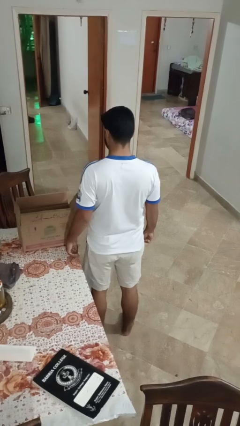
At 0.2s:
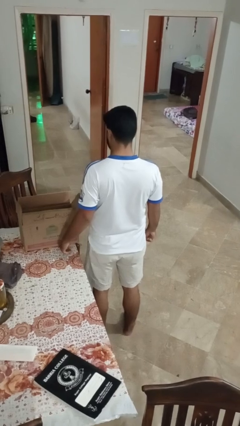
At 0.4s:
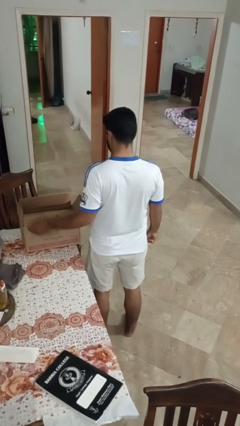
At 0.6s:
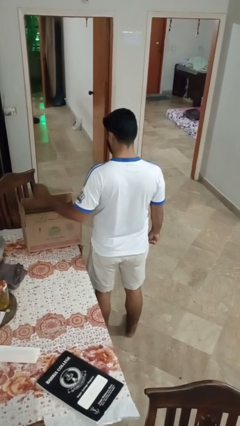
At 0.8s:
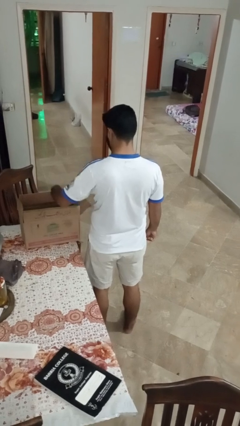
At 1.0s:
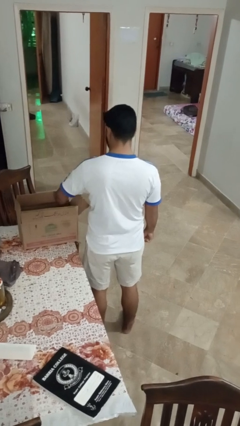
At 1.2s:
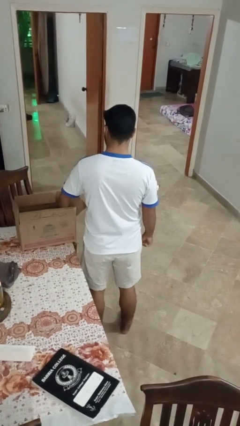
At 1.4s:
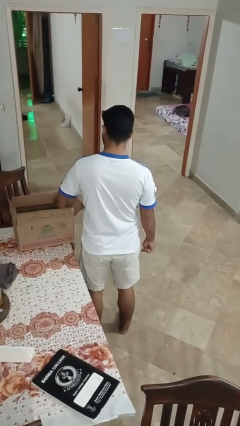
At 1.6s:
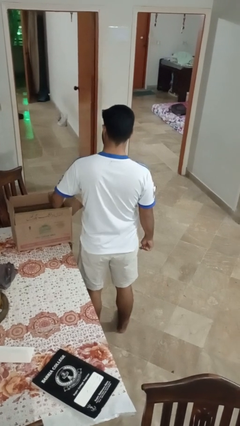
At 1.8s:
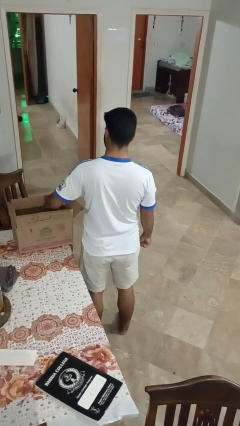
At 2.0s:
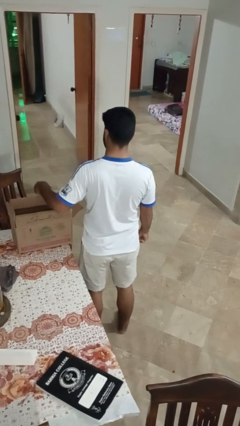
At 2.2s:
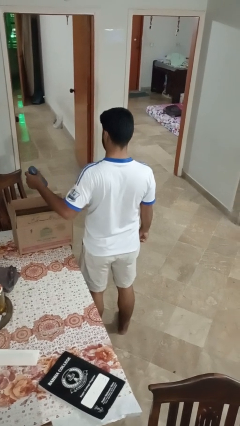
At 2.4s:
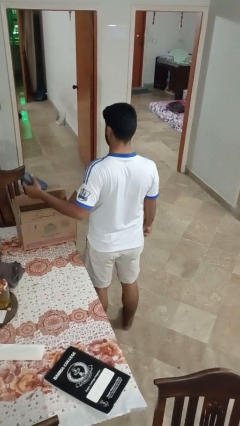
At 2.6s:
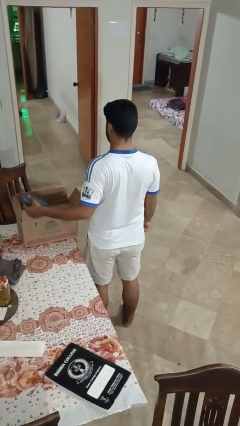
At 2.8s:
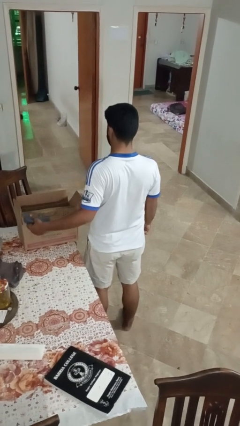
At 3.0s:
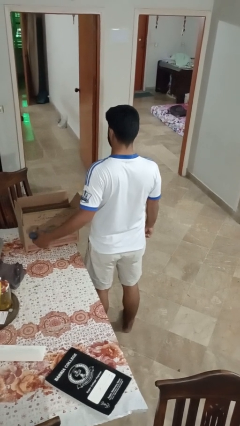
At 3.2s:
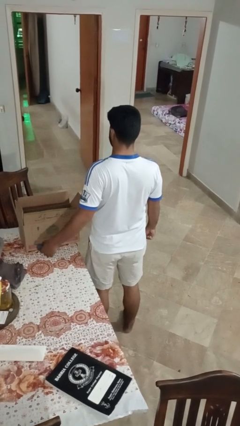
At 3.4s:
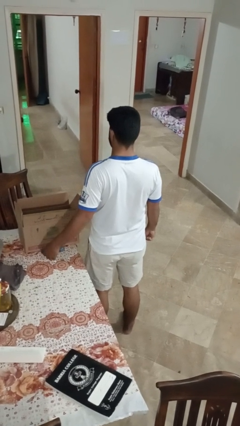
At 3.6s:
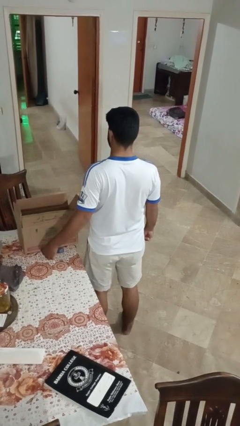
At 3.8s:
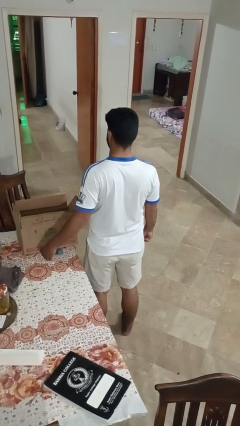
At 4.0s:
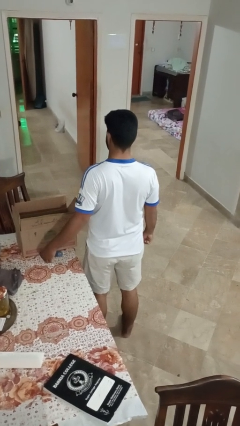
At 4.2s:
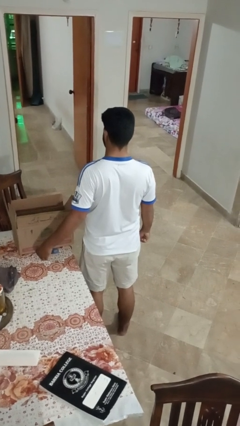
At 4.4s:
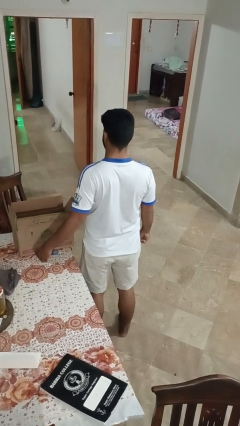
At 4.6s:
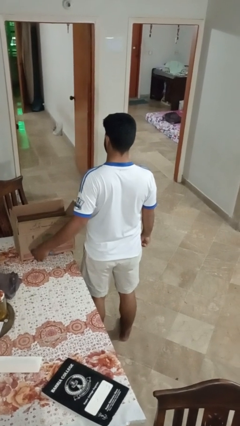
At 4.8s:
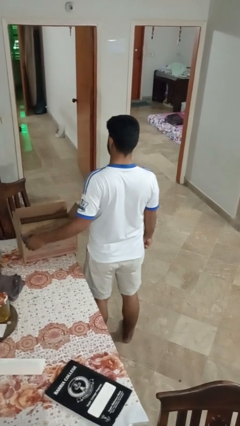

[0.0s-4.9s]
person takes object from box

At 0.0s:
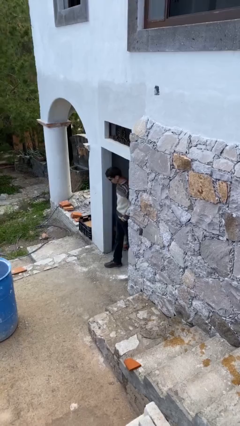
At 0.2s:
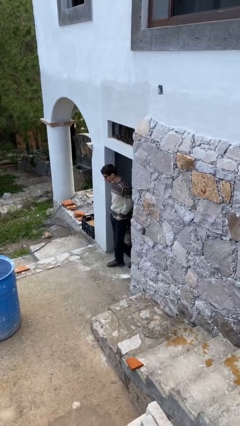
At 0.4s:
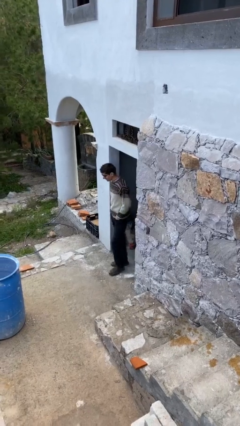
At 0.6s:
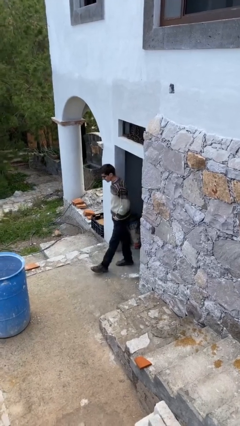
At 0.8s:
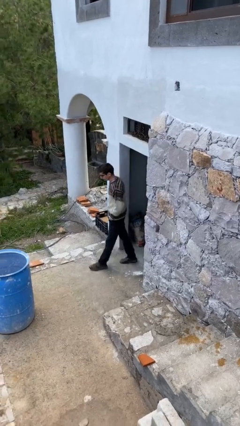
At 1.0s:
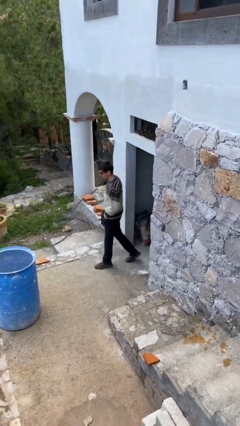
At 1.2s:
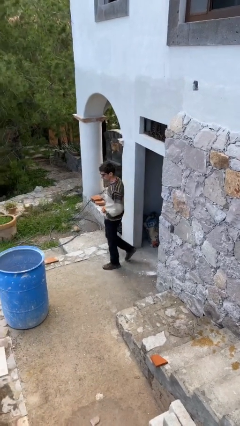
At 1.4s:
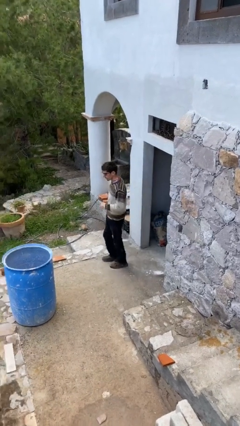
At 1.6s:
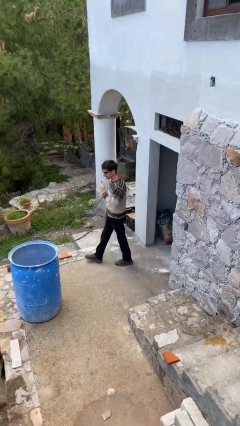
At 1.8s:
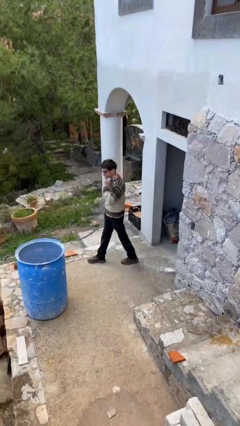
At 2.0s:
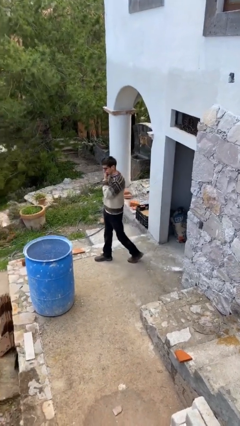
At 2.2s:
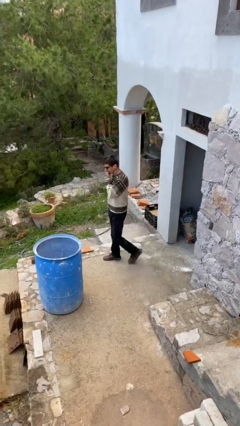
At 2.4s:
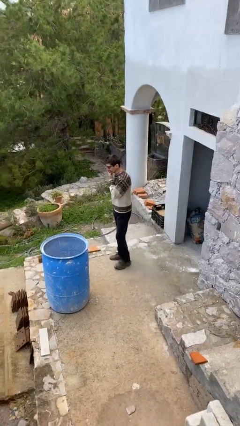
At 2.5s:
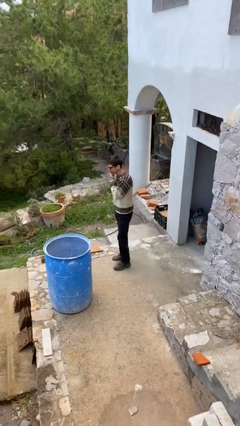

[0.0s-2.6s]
person enters scene through structure

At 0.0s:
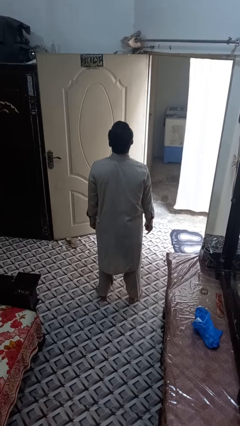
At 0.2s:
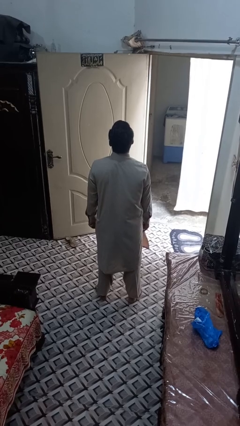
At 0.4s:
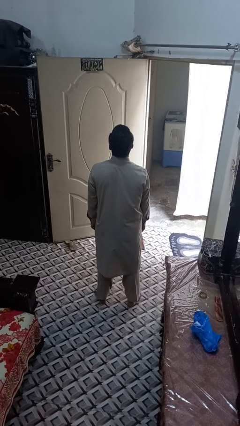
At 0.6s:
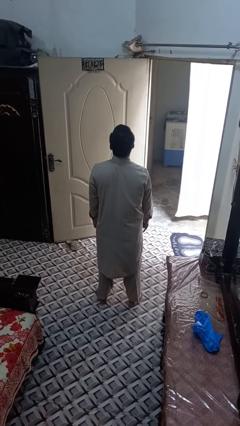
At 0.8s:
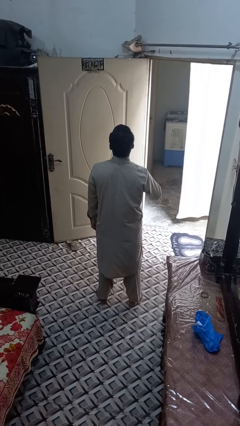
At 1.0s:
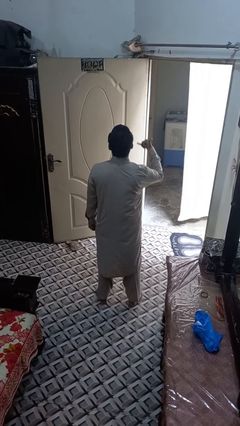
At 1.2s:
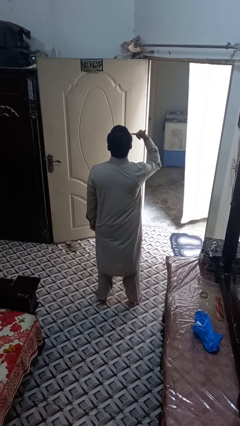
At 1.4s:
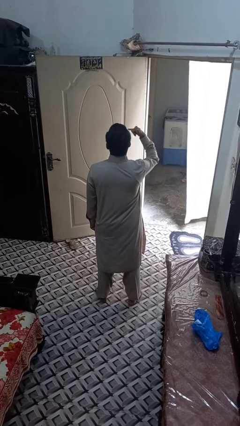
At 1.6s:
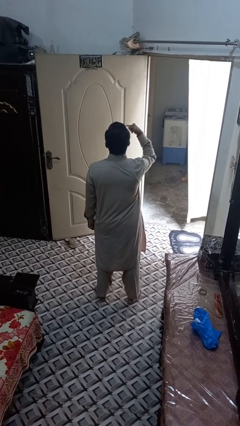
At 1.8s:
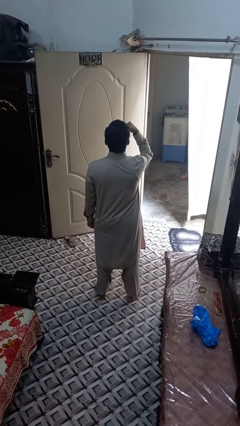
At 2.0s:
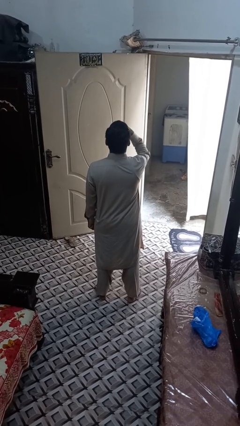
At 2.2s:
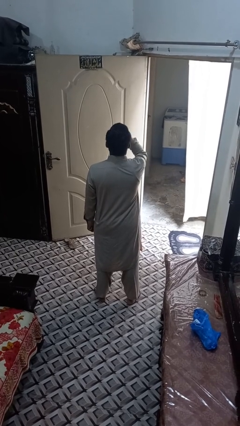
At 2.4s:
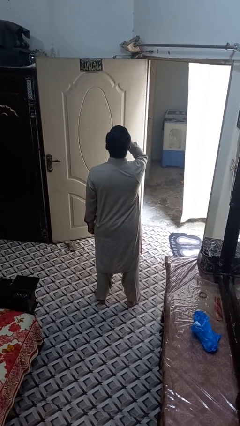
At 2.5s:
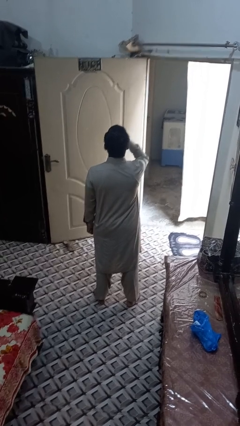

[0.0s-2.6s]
person gestures hang loose

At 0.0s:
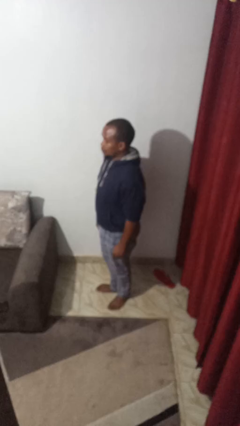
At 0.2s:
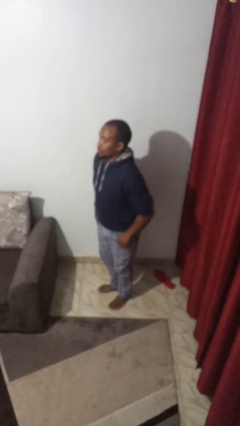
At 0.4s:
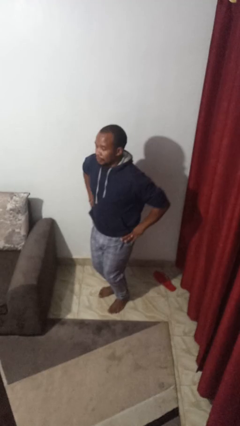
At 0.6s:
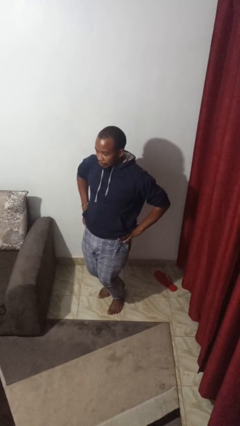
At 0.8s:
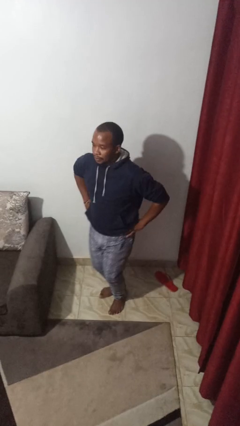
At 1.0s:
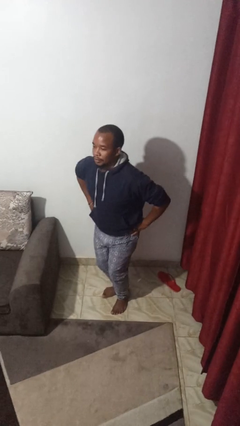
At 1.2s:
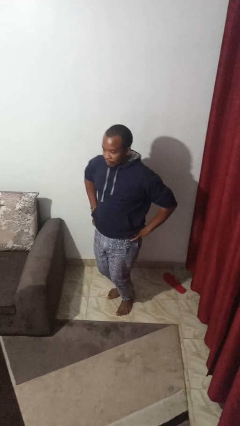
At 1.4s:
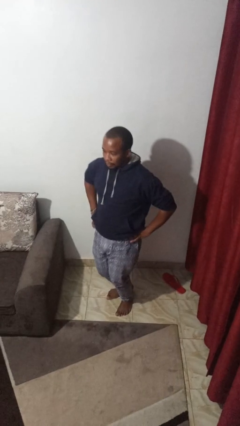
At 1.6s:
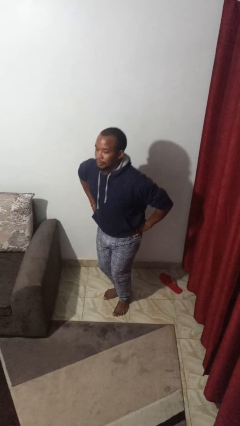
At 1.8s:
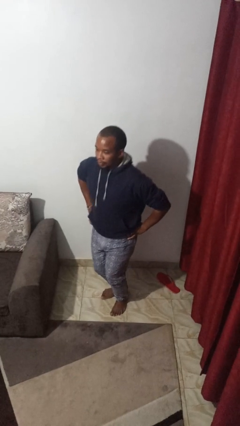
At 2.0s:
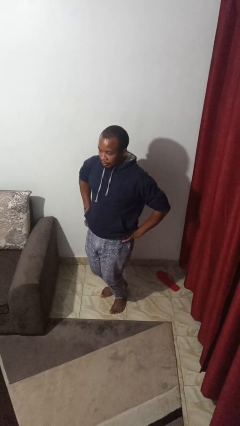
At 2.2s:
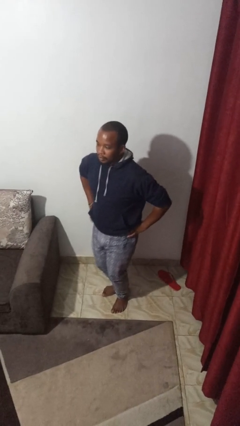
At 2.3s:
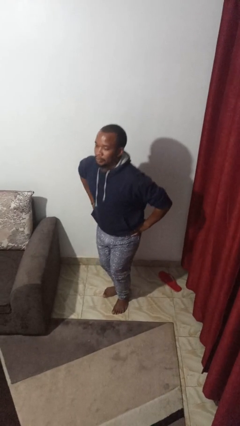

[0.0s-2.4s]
person wiggles hips

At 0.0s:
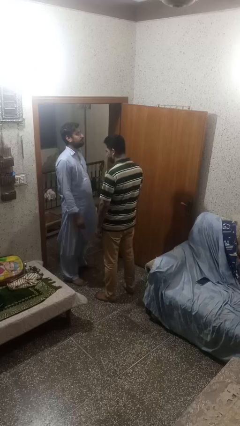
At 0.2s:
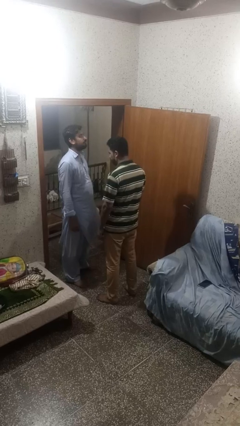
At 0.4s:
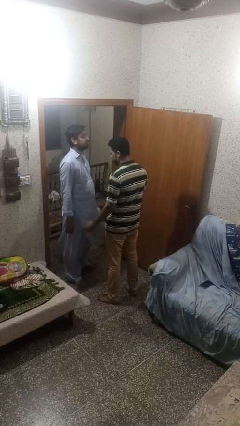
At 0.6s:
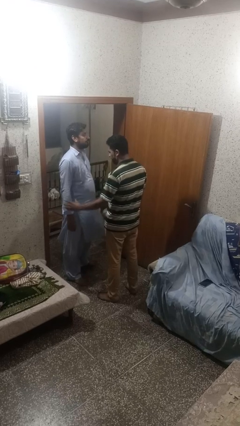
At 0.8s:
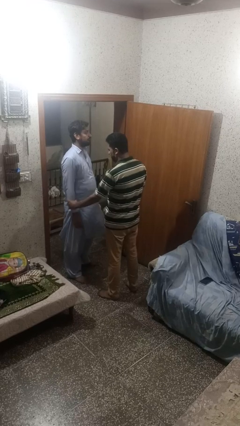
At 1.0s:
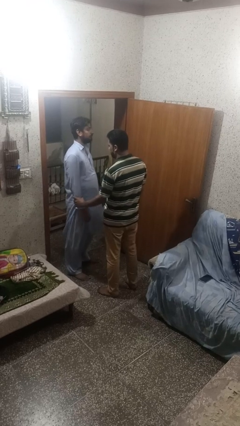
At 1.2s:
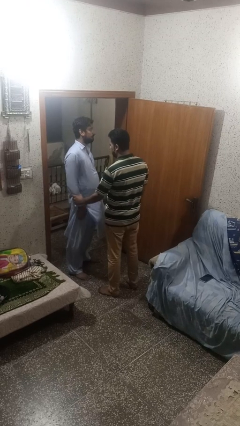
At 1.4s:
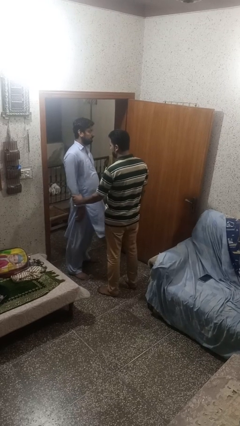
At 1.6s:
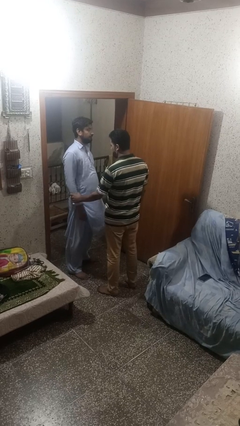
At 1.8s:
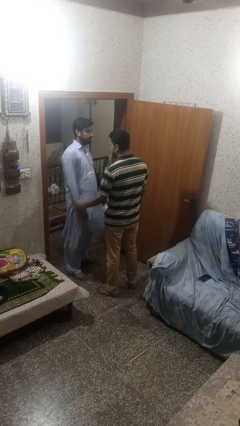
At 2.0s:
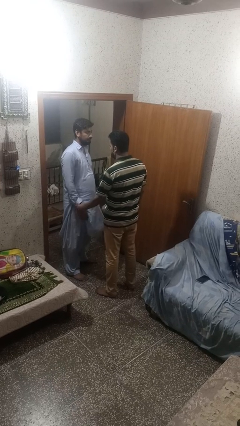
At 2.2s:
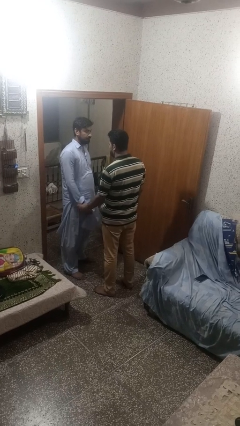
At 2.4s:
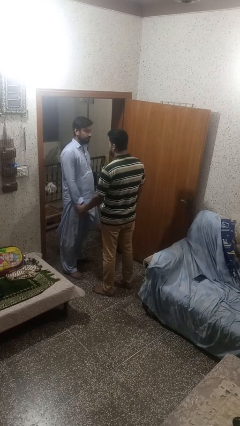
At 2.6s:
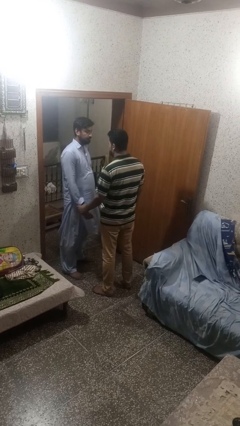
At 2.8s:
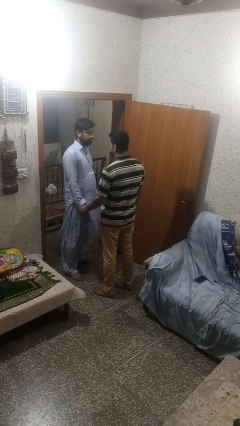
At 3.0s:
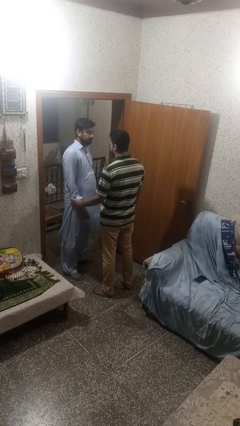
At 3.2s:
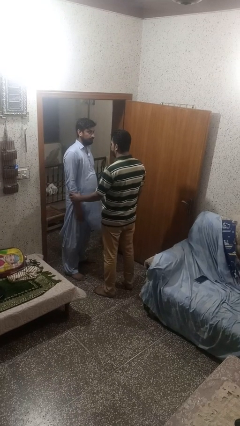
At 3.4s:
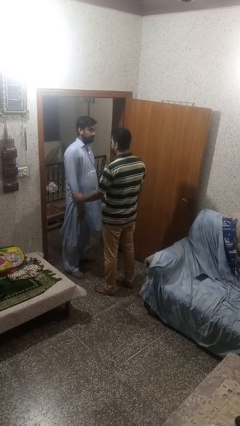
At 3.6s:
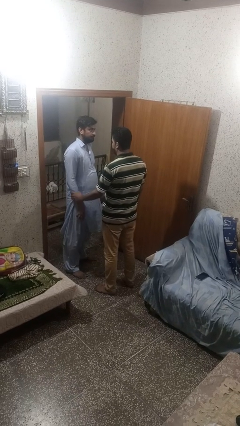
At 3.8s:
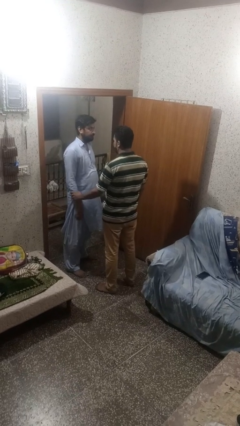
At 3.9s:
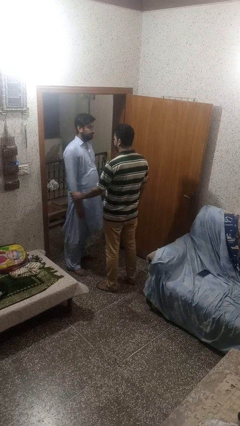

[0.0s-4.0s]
person grabs person by forearm

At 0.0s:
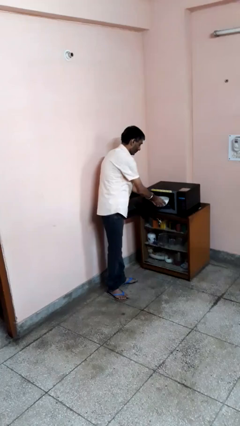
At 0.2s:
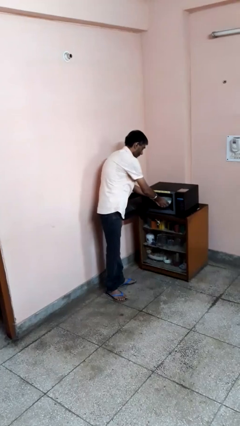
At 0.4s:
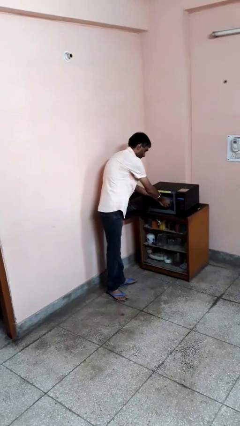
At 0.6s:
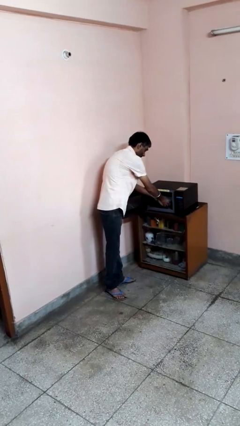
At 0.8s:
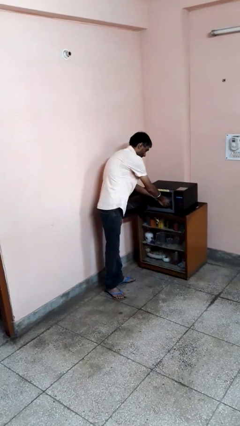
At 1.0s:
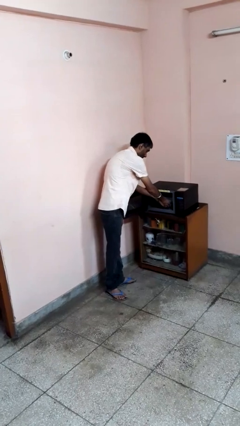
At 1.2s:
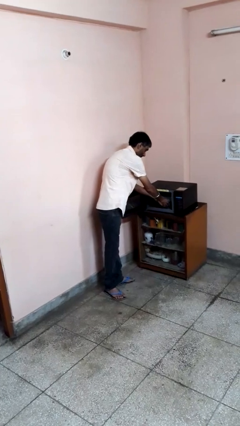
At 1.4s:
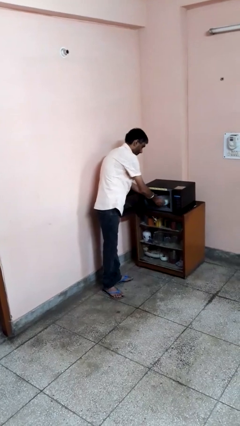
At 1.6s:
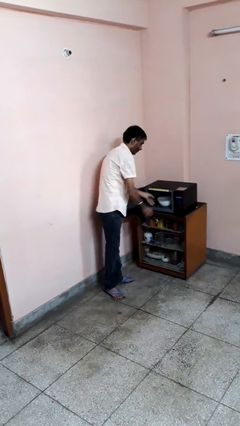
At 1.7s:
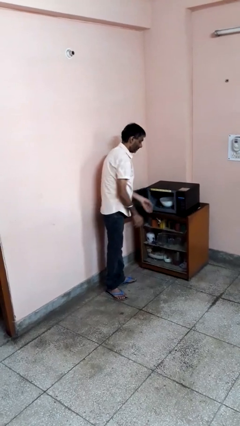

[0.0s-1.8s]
person puts object into microwave
